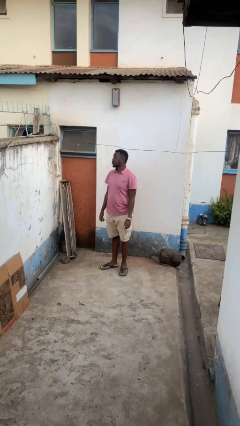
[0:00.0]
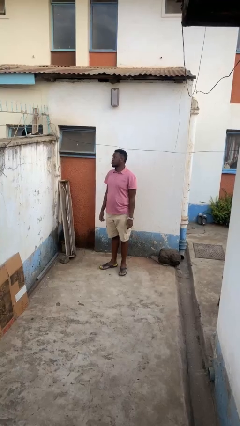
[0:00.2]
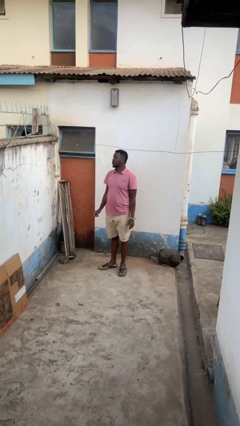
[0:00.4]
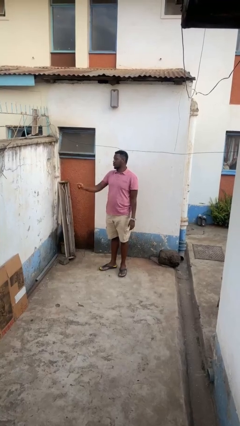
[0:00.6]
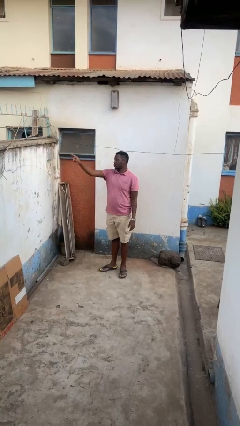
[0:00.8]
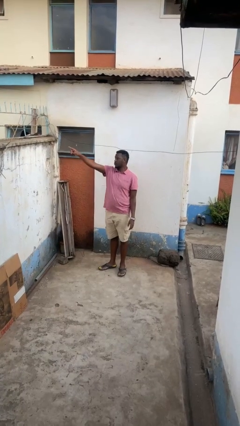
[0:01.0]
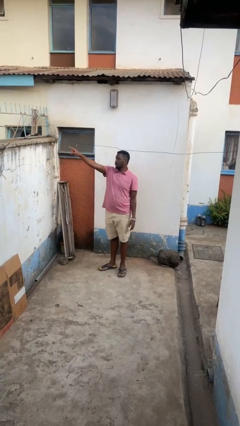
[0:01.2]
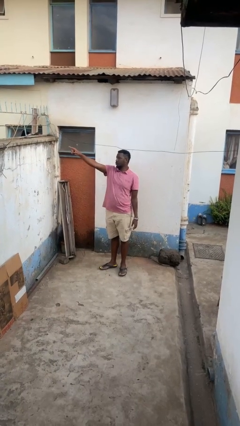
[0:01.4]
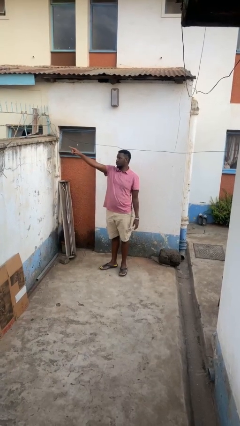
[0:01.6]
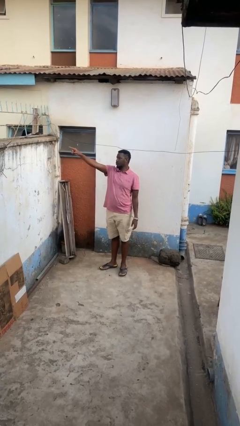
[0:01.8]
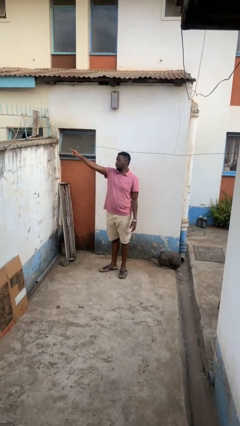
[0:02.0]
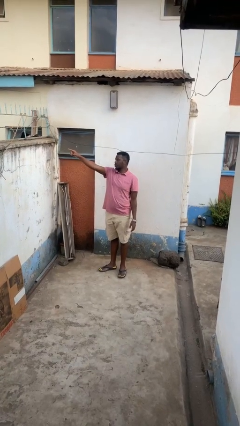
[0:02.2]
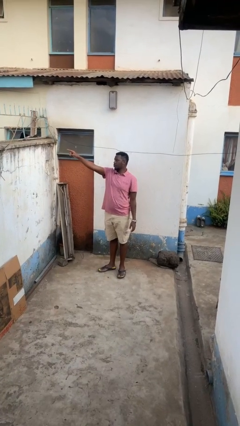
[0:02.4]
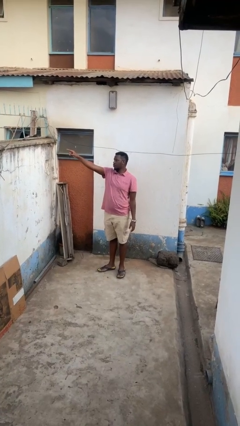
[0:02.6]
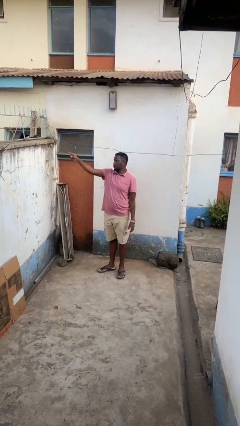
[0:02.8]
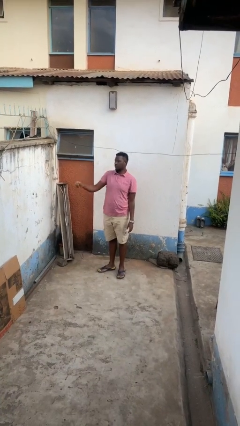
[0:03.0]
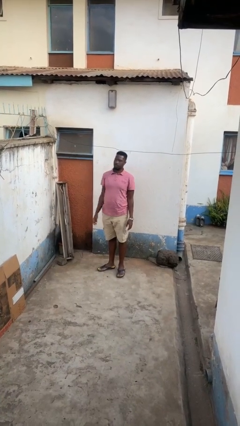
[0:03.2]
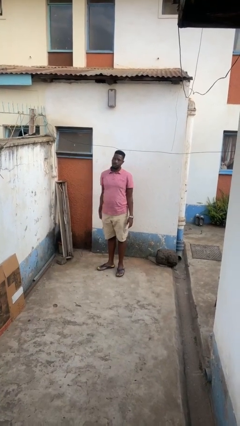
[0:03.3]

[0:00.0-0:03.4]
person points at person

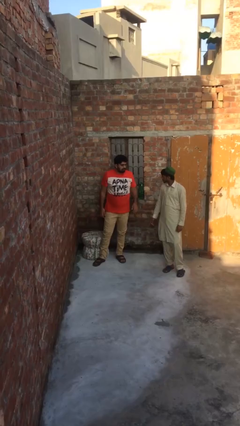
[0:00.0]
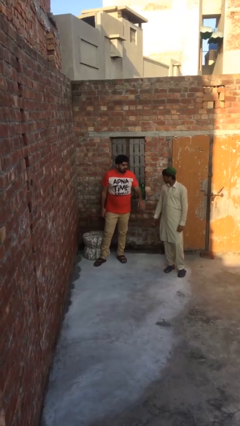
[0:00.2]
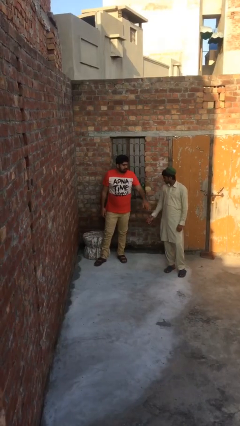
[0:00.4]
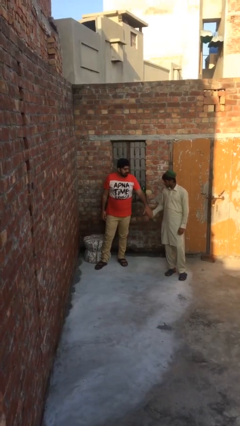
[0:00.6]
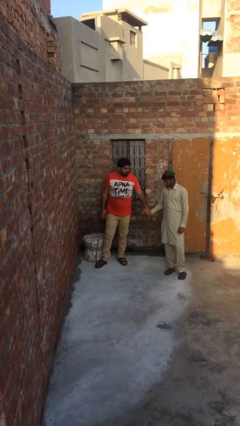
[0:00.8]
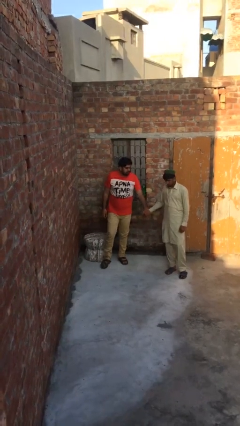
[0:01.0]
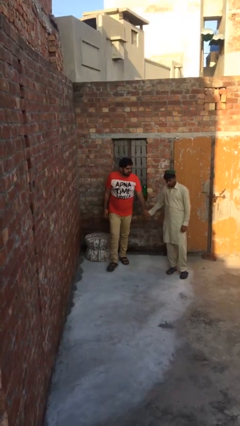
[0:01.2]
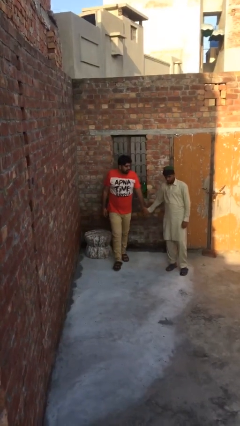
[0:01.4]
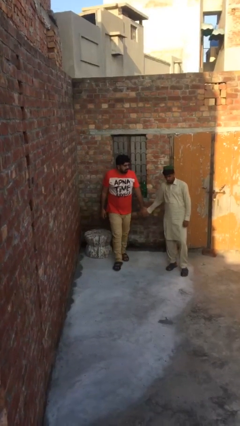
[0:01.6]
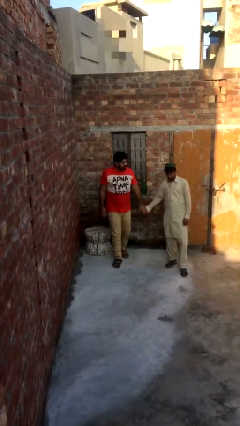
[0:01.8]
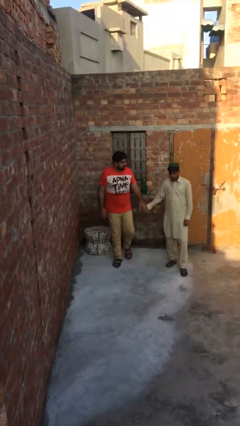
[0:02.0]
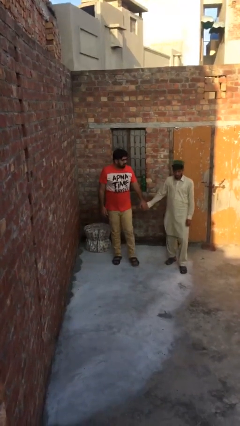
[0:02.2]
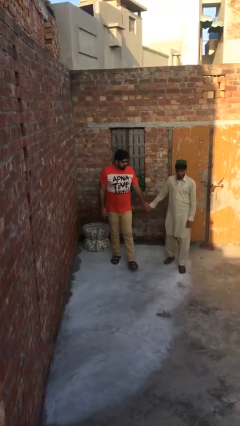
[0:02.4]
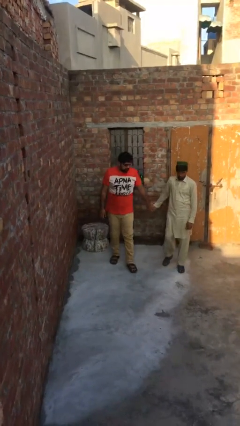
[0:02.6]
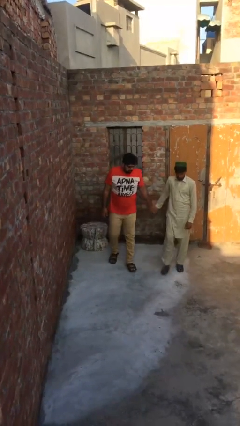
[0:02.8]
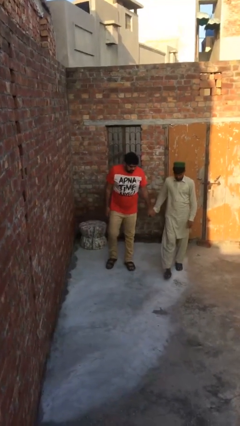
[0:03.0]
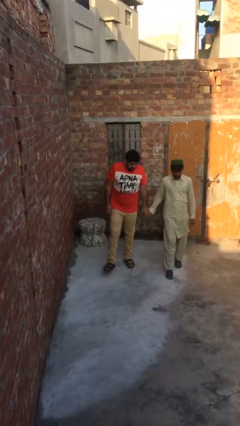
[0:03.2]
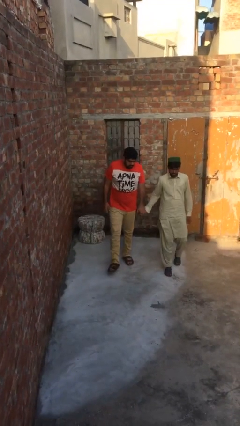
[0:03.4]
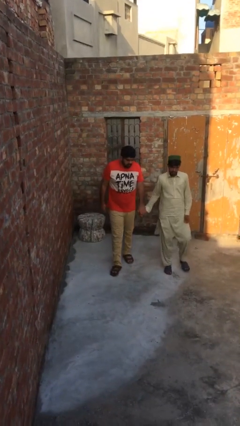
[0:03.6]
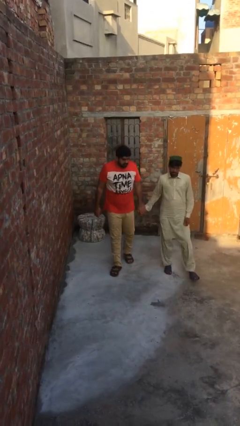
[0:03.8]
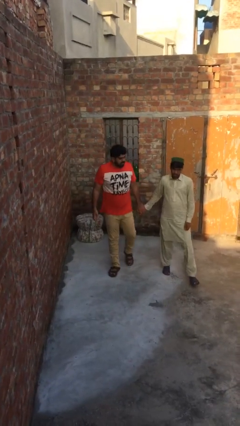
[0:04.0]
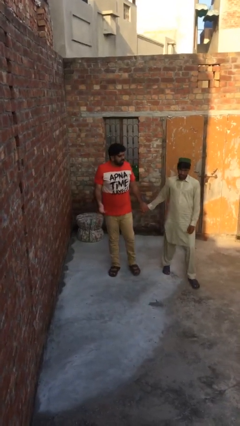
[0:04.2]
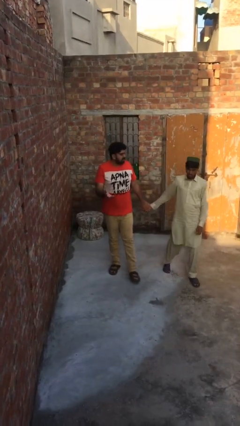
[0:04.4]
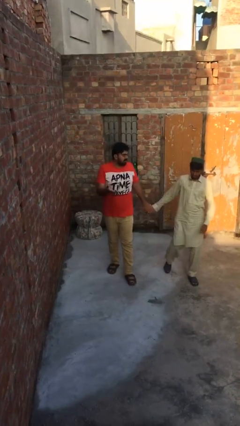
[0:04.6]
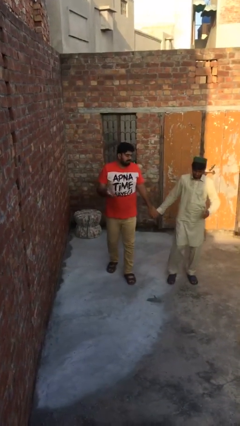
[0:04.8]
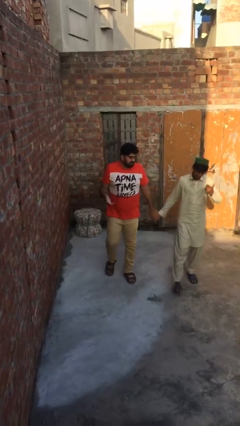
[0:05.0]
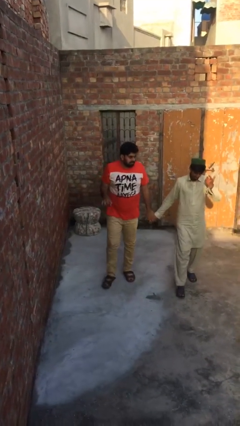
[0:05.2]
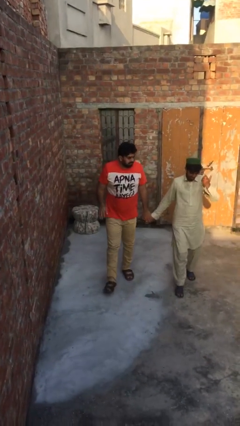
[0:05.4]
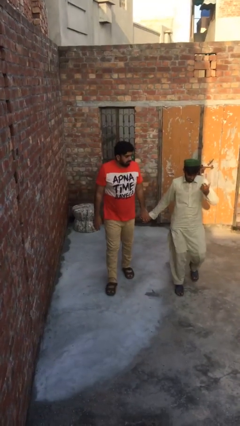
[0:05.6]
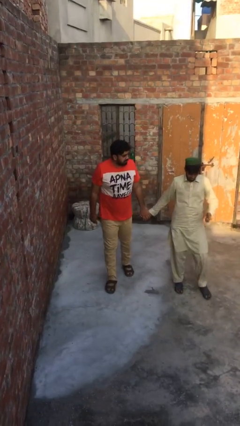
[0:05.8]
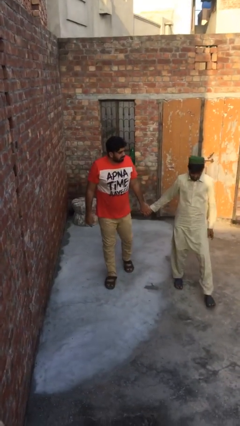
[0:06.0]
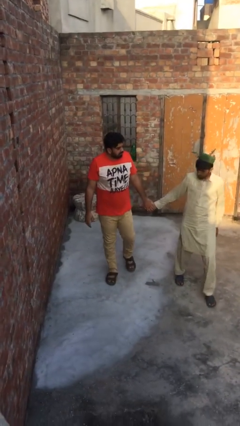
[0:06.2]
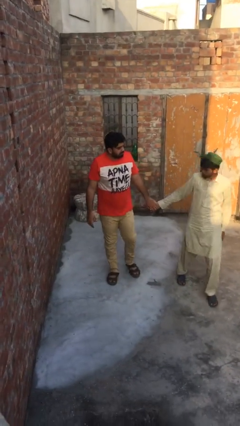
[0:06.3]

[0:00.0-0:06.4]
person holds hand

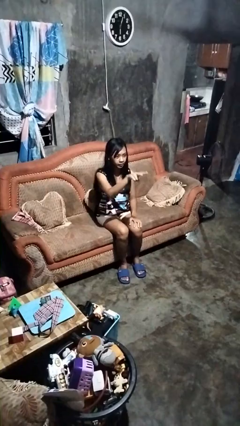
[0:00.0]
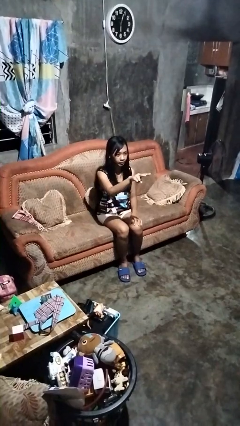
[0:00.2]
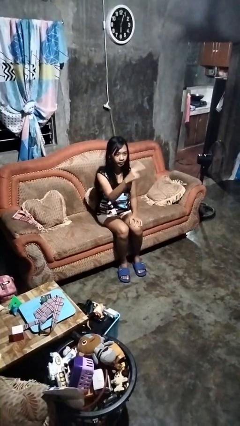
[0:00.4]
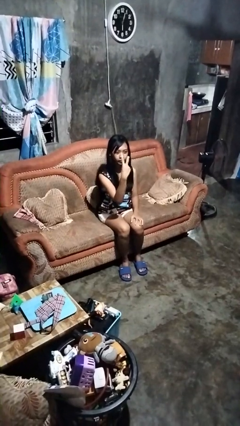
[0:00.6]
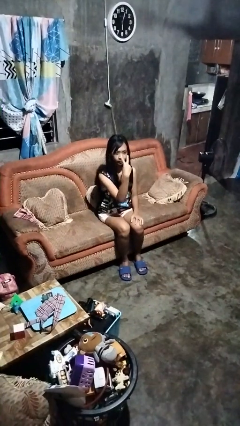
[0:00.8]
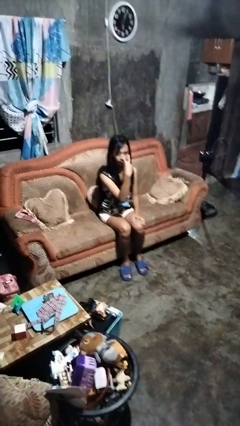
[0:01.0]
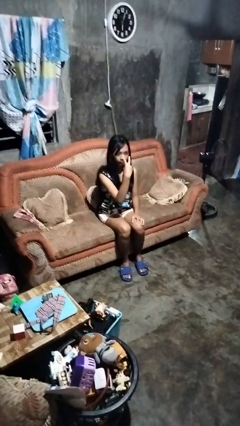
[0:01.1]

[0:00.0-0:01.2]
person gestures watch closely

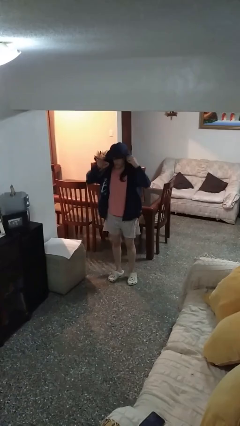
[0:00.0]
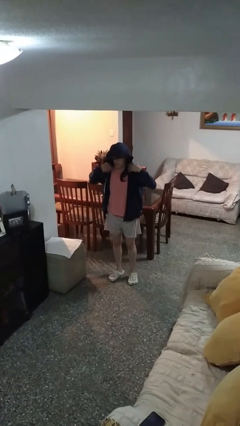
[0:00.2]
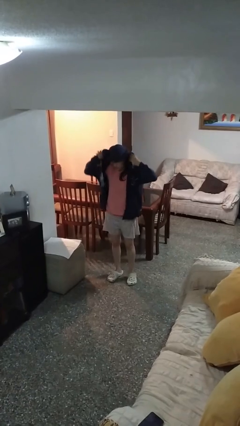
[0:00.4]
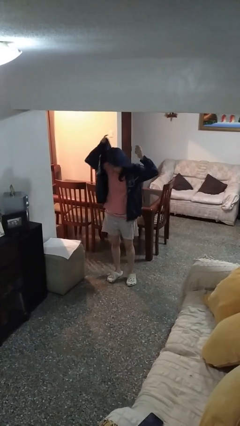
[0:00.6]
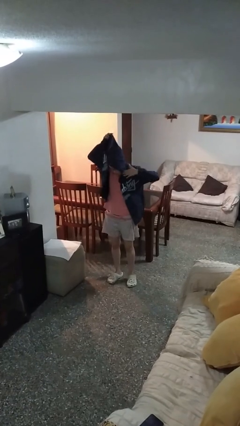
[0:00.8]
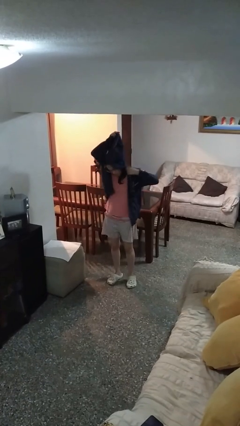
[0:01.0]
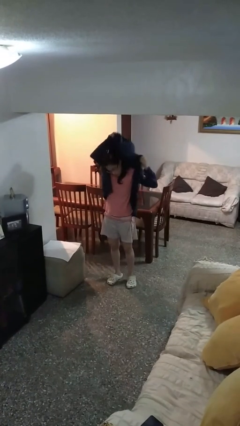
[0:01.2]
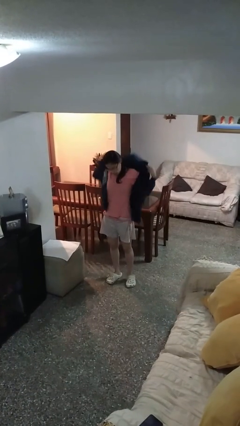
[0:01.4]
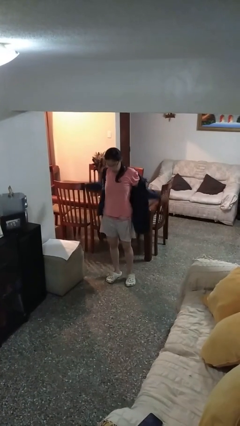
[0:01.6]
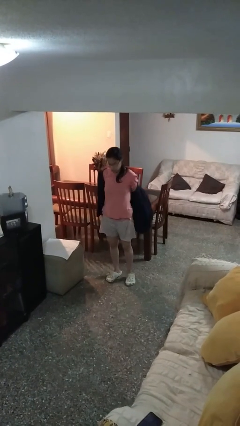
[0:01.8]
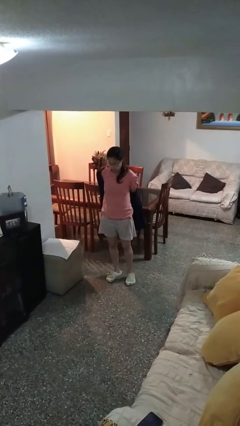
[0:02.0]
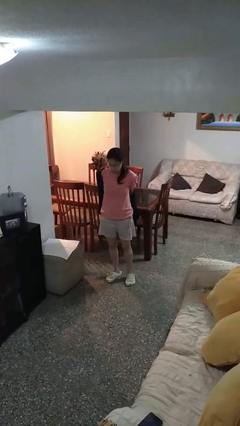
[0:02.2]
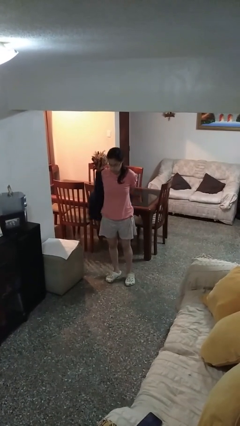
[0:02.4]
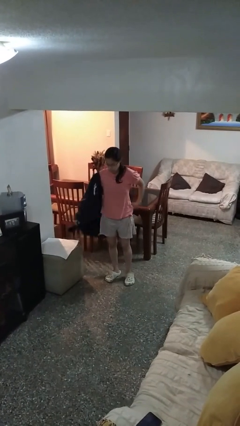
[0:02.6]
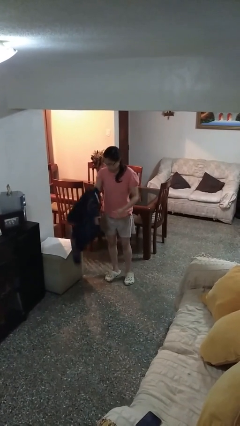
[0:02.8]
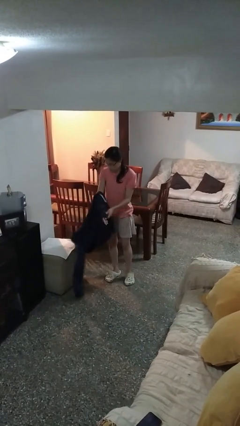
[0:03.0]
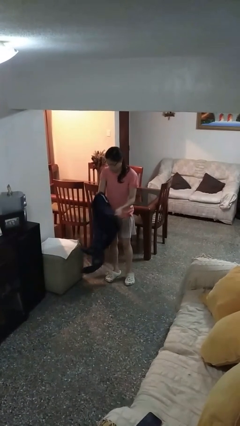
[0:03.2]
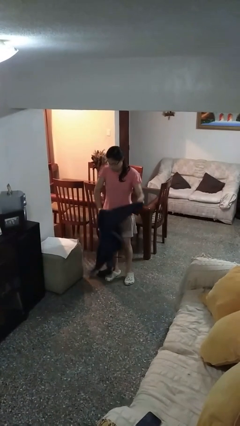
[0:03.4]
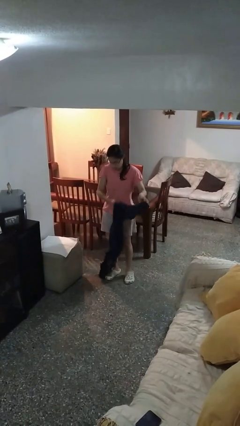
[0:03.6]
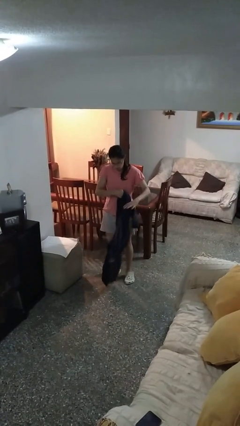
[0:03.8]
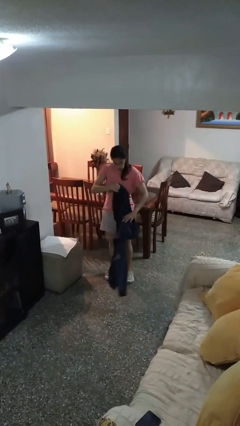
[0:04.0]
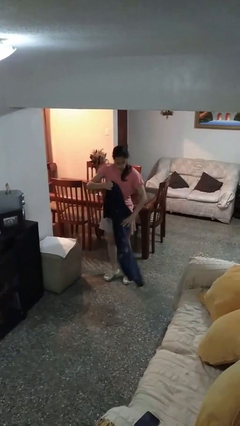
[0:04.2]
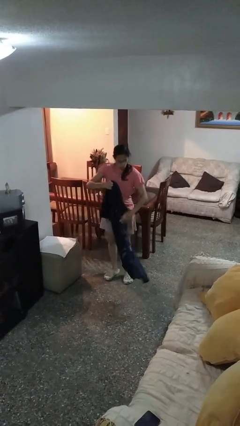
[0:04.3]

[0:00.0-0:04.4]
person takes off hoodie

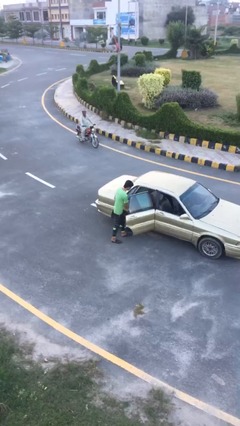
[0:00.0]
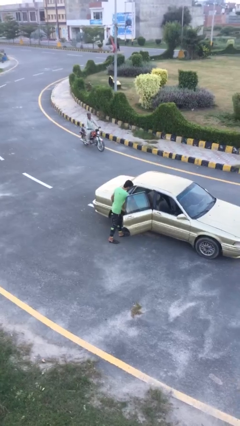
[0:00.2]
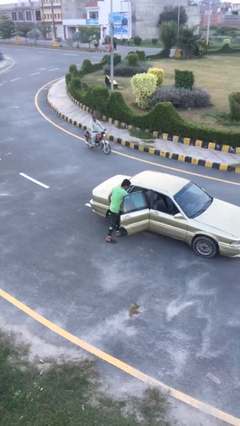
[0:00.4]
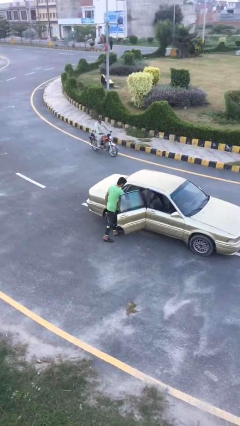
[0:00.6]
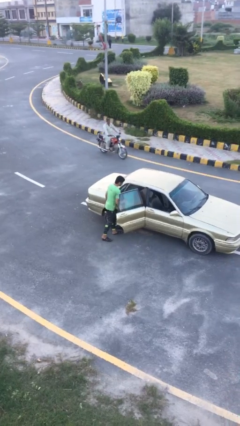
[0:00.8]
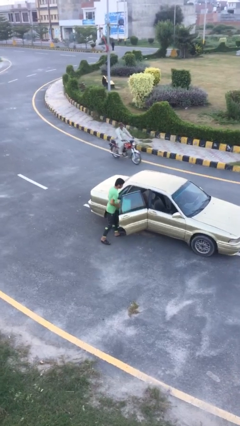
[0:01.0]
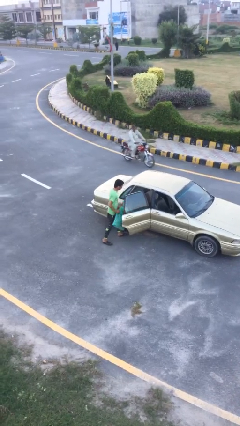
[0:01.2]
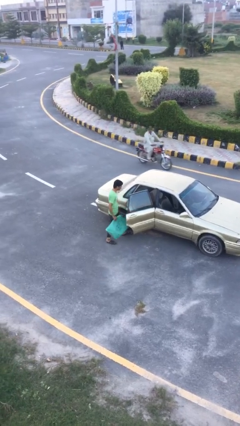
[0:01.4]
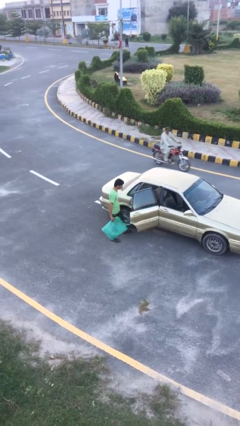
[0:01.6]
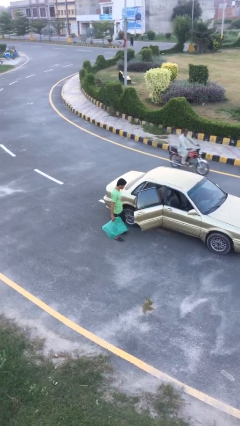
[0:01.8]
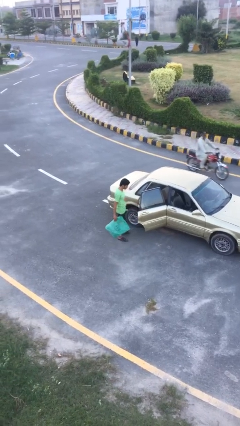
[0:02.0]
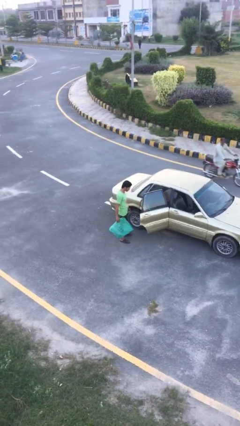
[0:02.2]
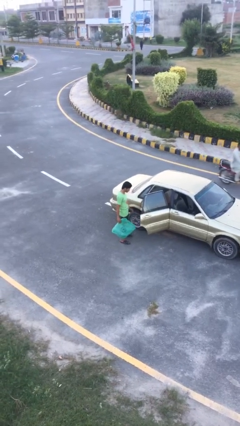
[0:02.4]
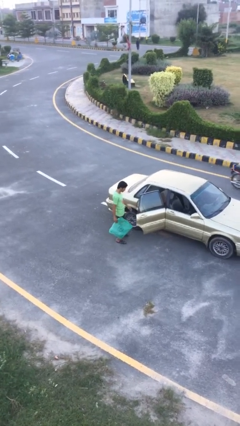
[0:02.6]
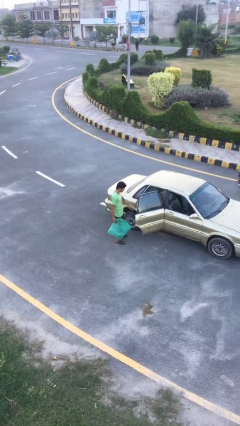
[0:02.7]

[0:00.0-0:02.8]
person unloads car
